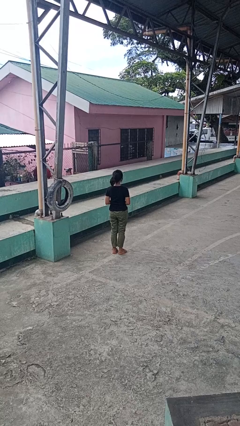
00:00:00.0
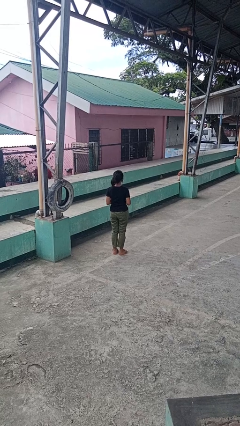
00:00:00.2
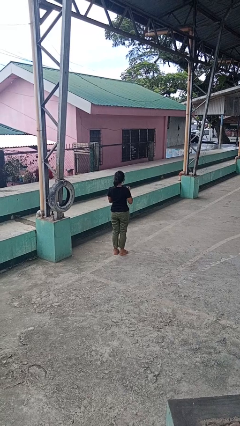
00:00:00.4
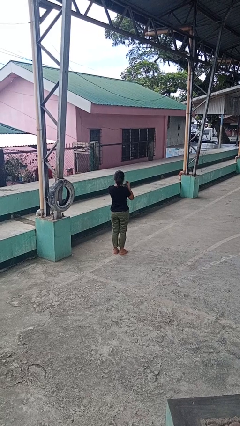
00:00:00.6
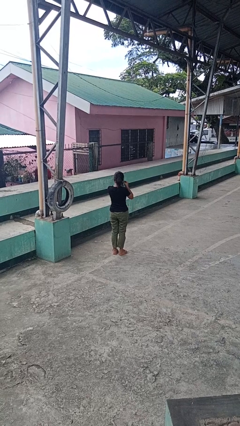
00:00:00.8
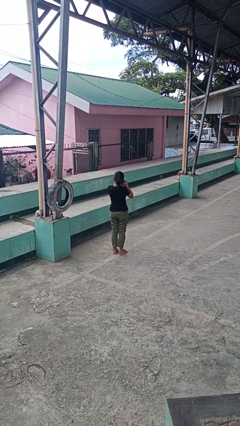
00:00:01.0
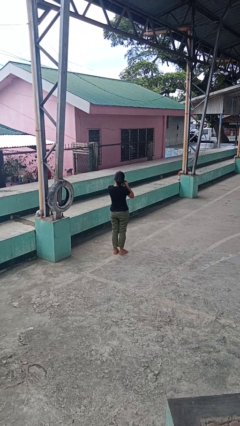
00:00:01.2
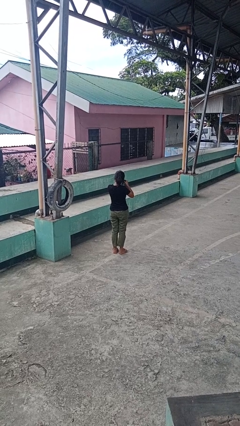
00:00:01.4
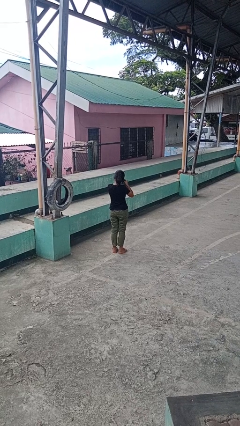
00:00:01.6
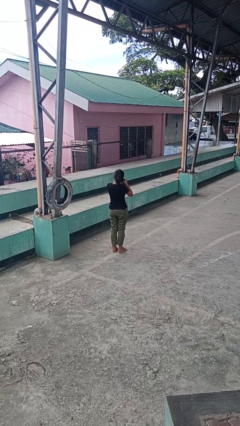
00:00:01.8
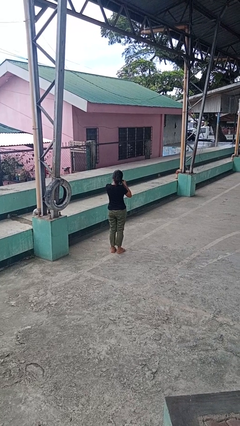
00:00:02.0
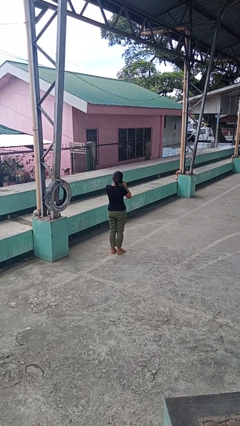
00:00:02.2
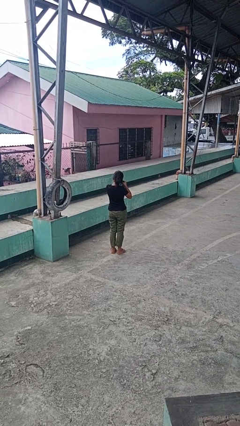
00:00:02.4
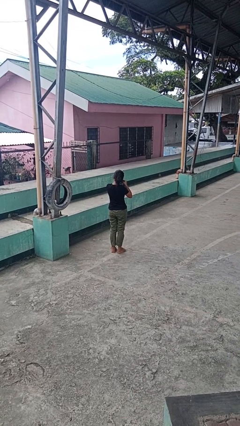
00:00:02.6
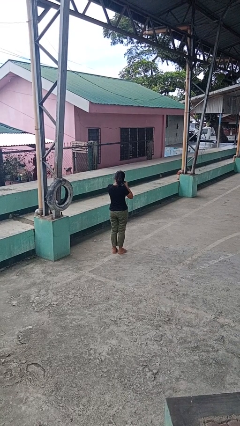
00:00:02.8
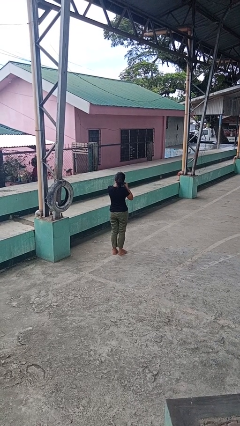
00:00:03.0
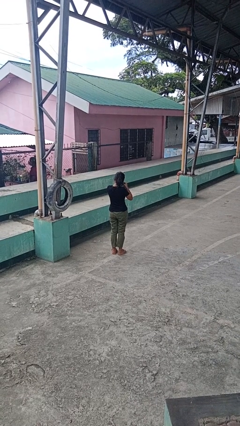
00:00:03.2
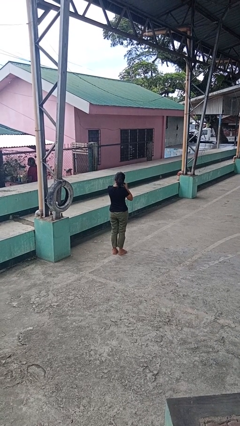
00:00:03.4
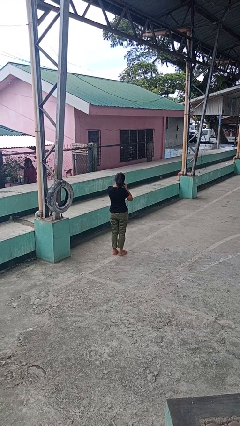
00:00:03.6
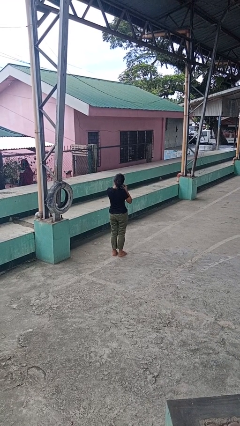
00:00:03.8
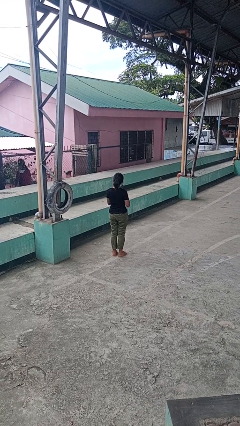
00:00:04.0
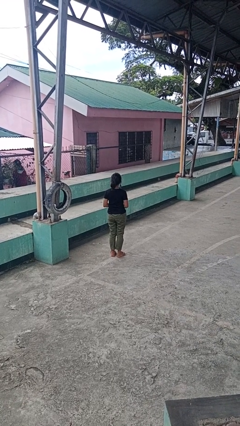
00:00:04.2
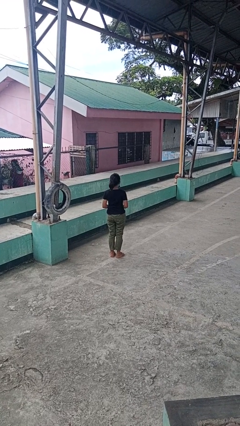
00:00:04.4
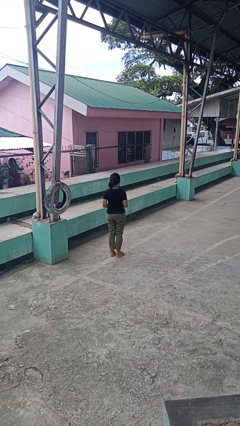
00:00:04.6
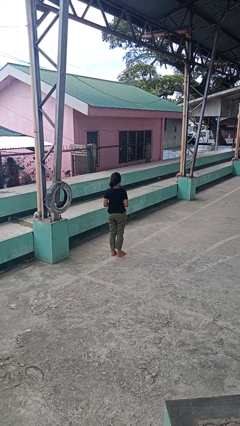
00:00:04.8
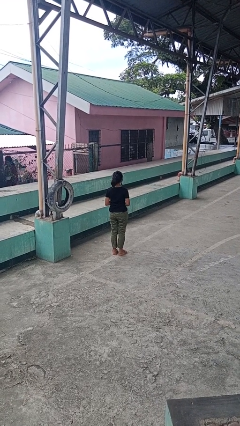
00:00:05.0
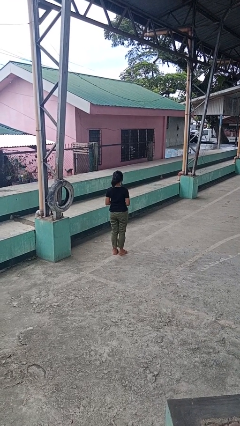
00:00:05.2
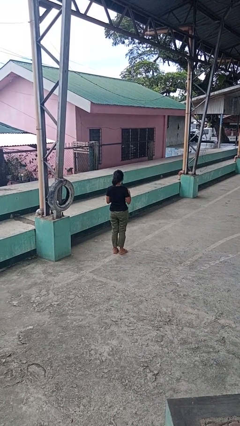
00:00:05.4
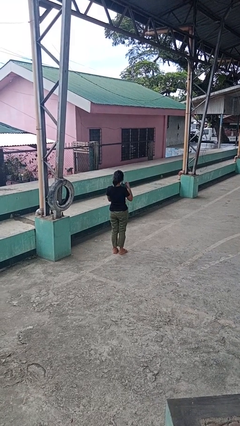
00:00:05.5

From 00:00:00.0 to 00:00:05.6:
person puts on earrings

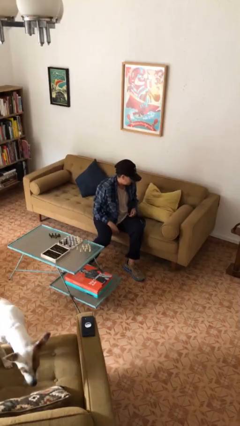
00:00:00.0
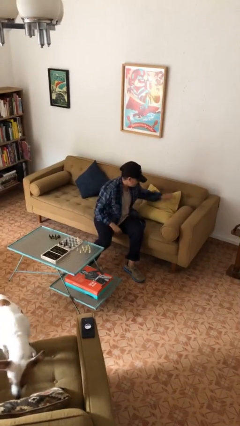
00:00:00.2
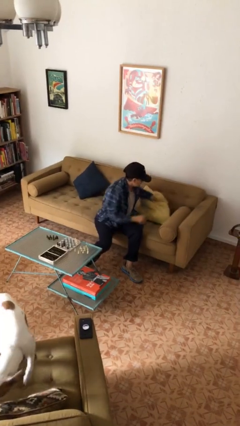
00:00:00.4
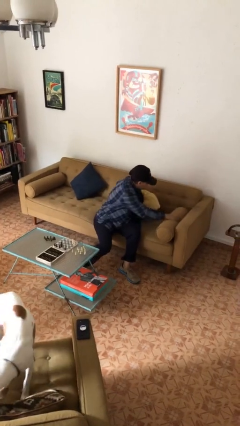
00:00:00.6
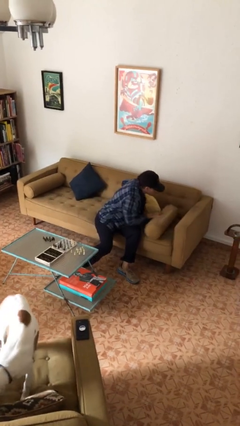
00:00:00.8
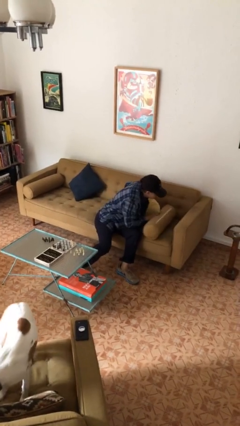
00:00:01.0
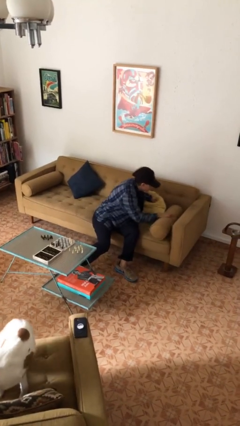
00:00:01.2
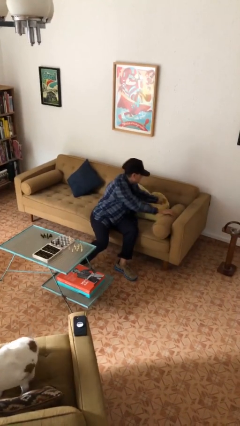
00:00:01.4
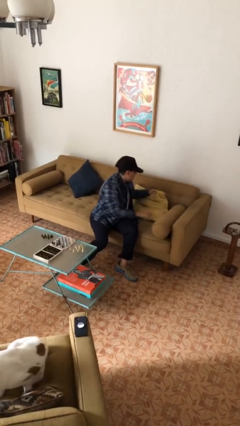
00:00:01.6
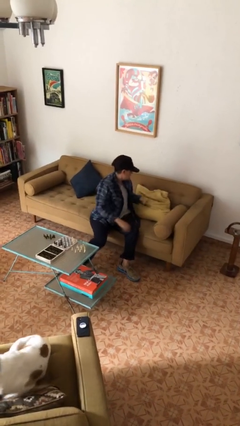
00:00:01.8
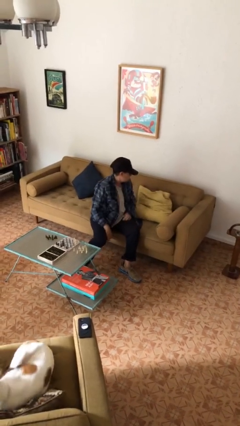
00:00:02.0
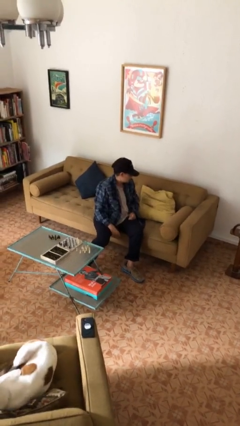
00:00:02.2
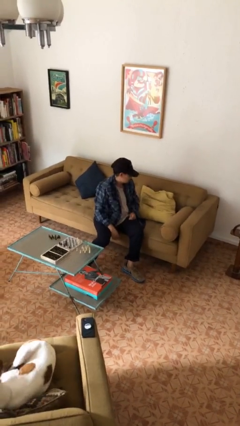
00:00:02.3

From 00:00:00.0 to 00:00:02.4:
person searches in couch

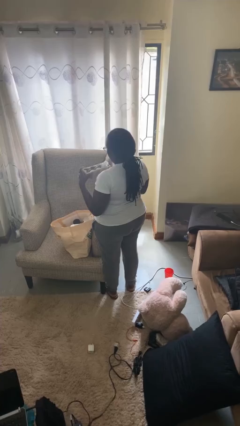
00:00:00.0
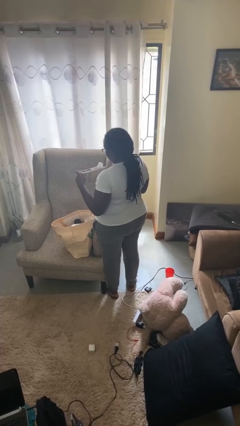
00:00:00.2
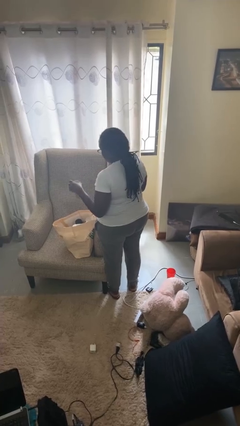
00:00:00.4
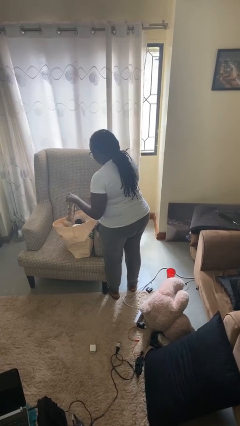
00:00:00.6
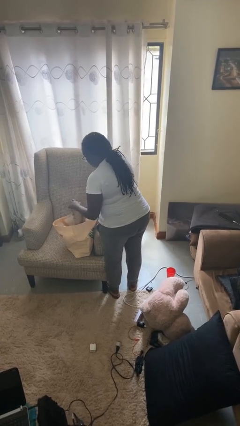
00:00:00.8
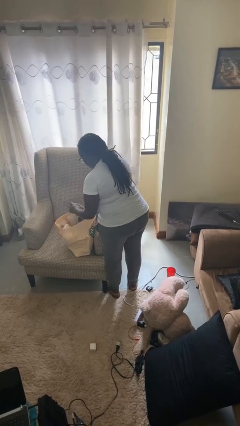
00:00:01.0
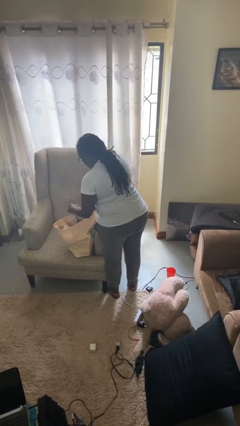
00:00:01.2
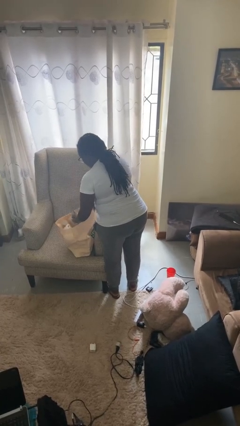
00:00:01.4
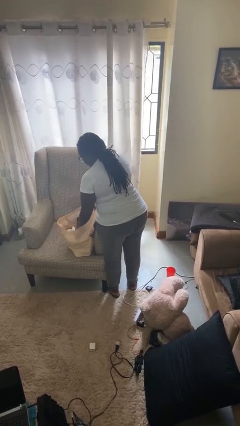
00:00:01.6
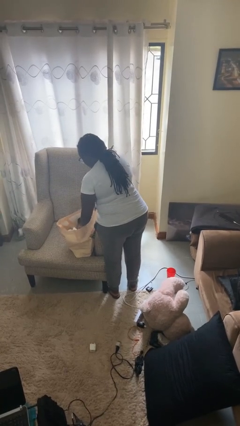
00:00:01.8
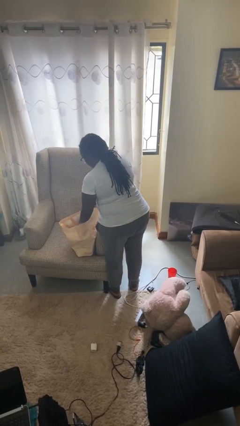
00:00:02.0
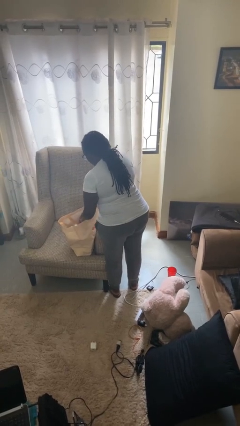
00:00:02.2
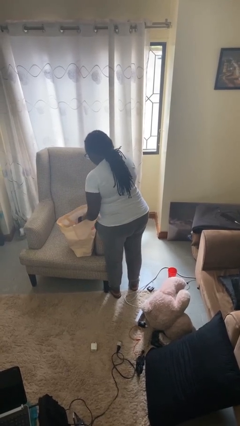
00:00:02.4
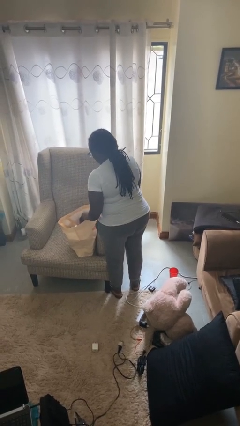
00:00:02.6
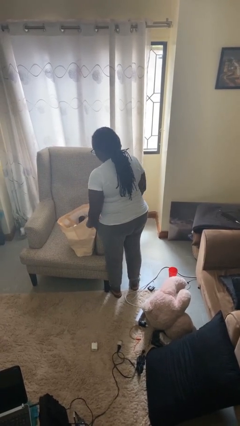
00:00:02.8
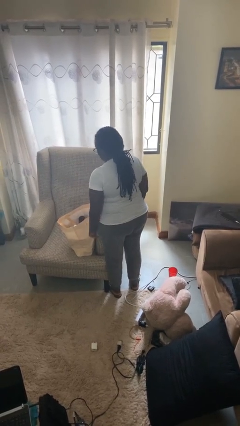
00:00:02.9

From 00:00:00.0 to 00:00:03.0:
person puts object into bag

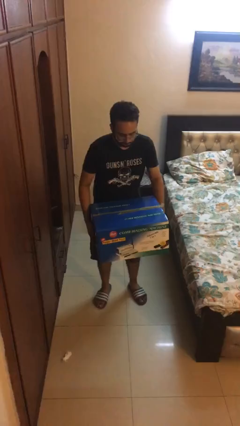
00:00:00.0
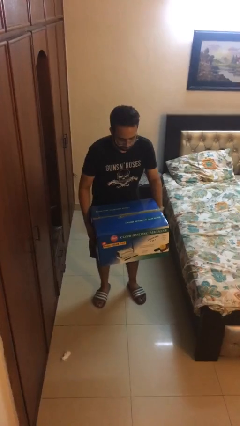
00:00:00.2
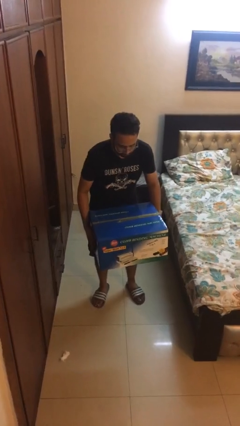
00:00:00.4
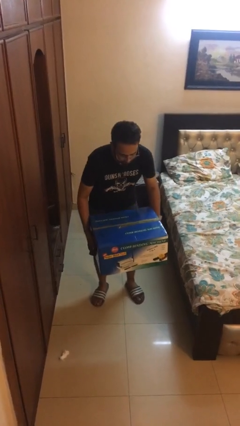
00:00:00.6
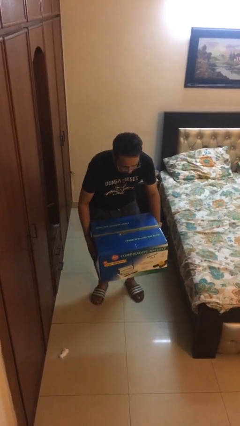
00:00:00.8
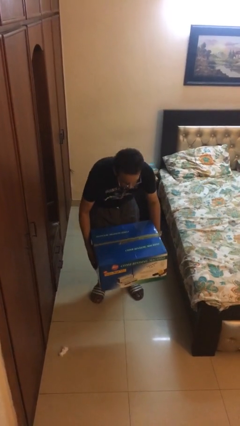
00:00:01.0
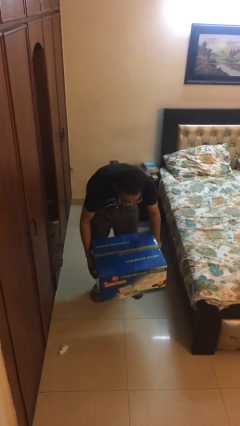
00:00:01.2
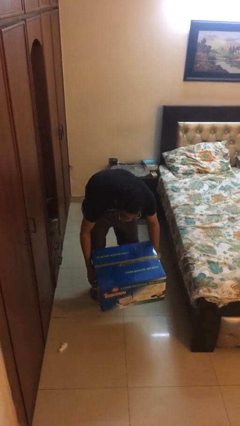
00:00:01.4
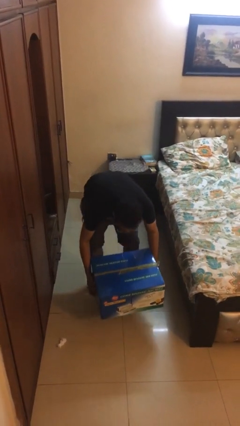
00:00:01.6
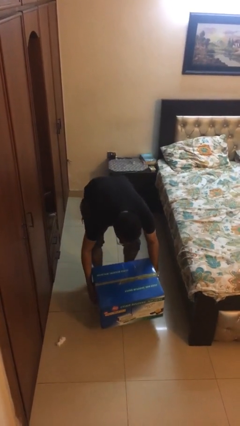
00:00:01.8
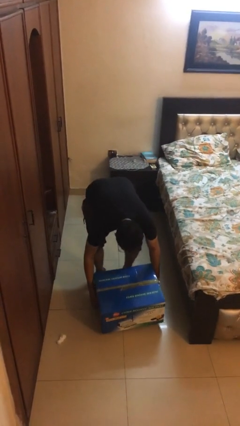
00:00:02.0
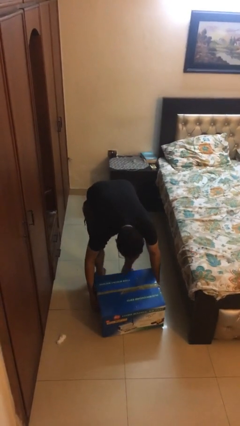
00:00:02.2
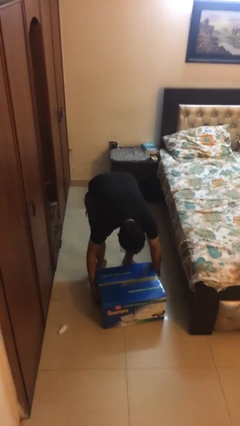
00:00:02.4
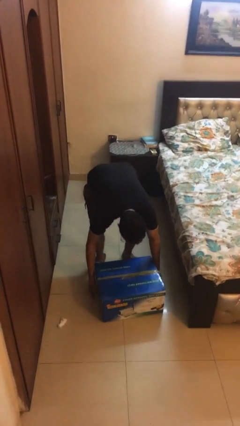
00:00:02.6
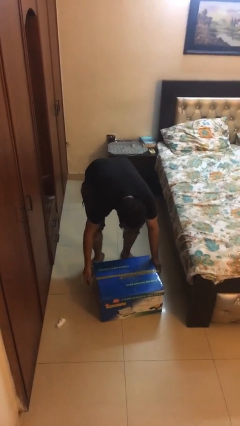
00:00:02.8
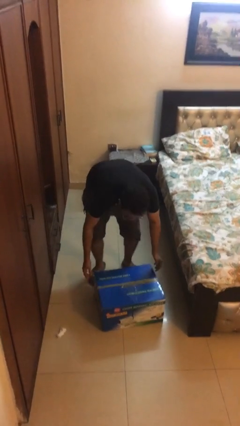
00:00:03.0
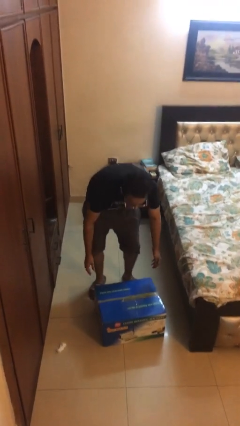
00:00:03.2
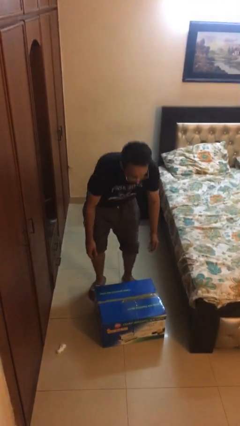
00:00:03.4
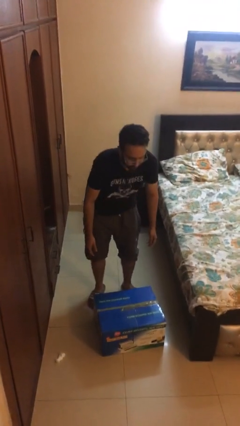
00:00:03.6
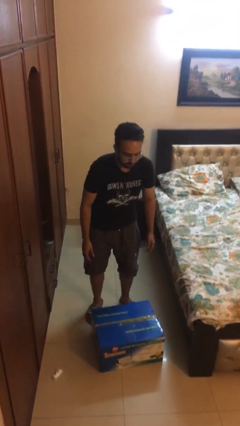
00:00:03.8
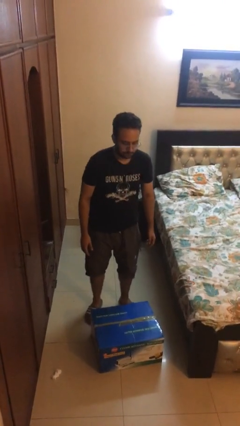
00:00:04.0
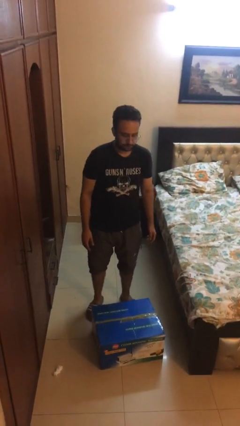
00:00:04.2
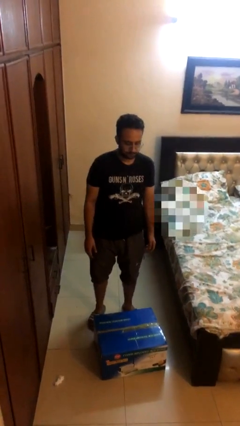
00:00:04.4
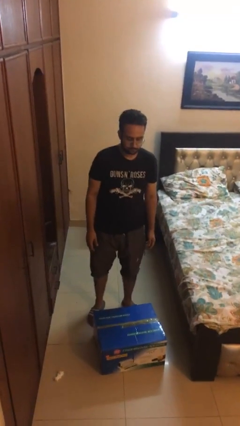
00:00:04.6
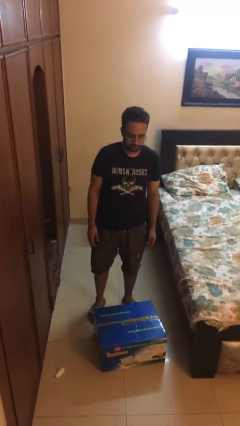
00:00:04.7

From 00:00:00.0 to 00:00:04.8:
person puts down object on floor

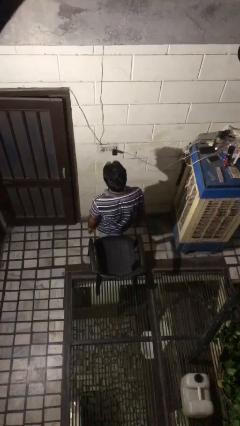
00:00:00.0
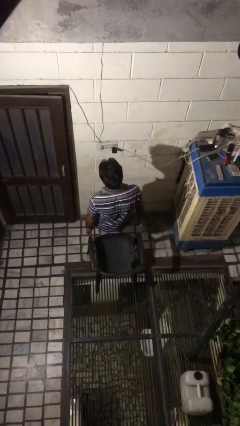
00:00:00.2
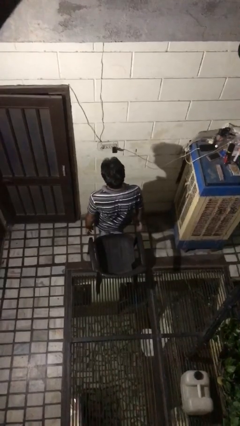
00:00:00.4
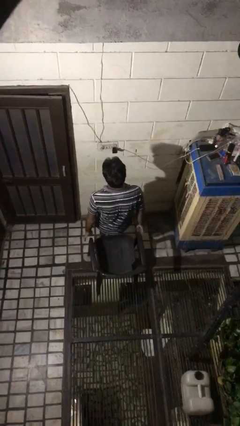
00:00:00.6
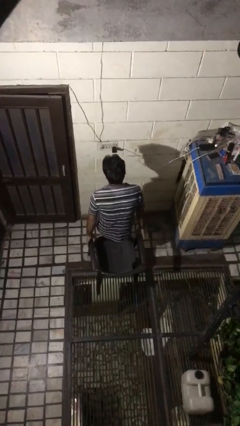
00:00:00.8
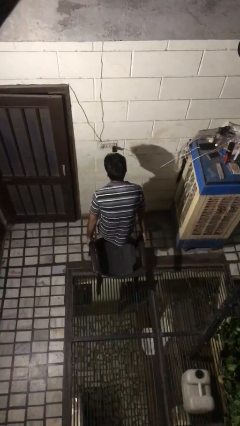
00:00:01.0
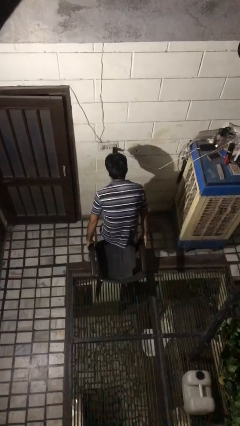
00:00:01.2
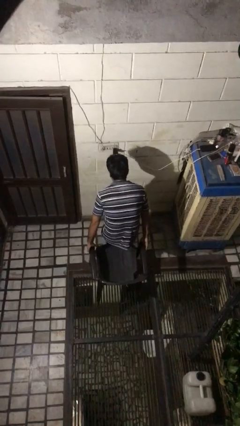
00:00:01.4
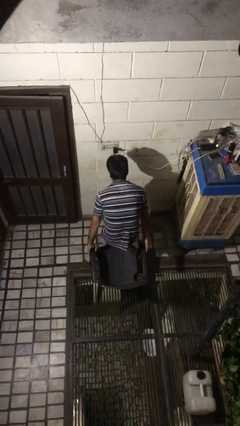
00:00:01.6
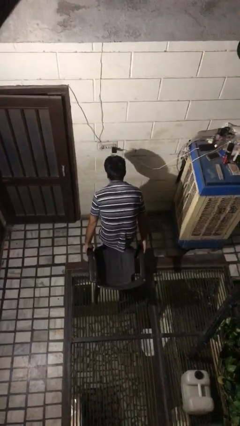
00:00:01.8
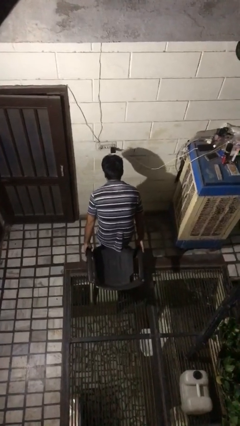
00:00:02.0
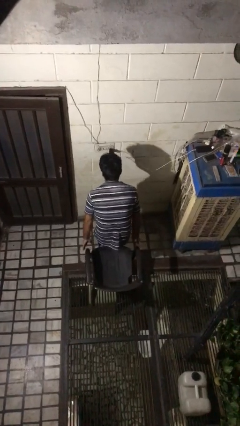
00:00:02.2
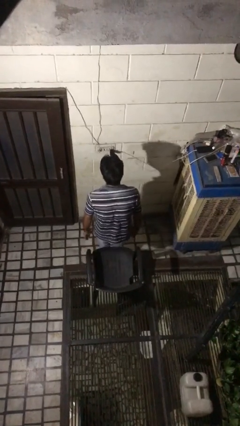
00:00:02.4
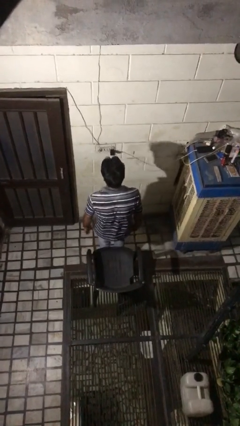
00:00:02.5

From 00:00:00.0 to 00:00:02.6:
person pushes in chair
